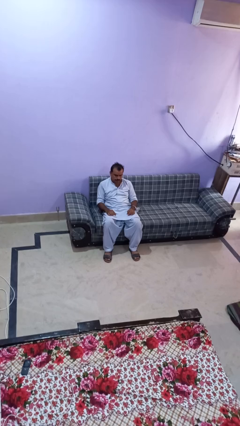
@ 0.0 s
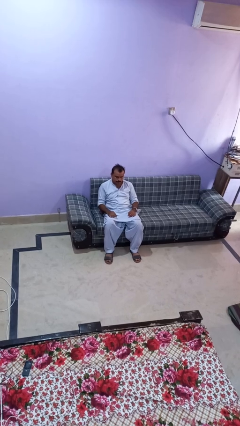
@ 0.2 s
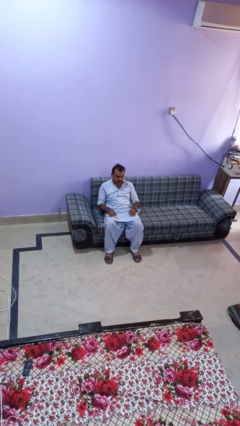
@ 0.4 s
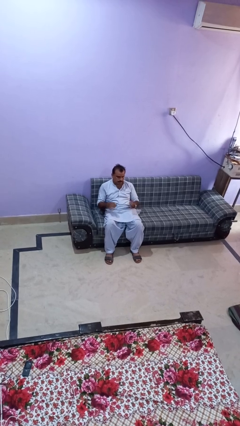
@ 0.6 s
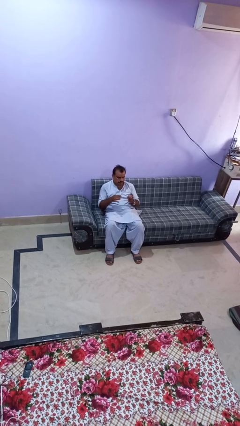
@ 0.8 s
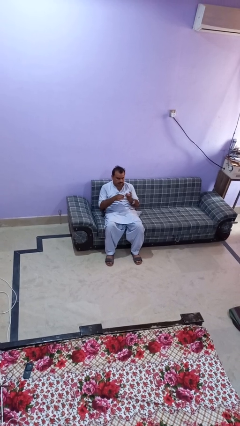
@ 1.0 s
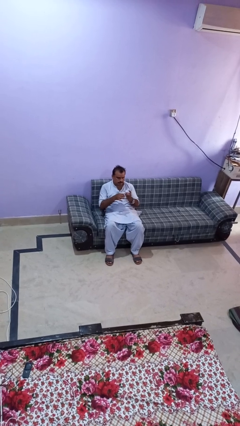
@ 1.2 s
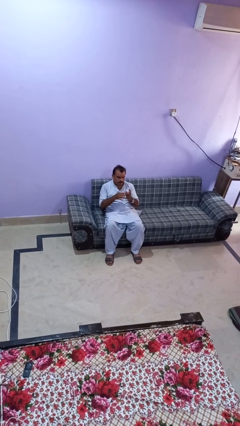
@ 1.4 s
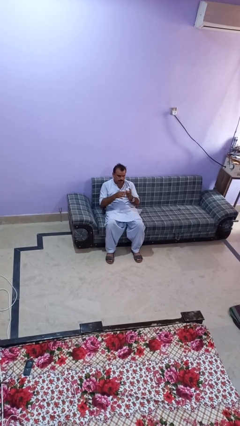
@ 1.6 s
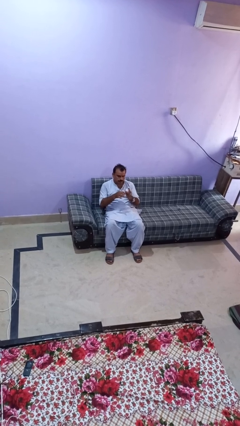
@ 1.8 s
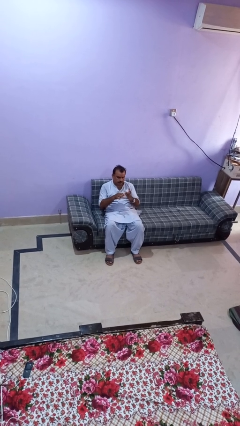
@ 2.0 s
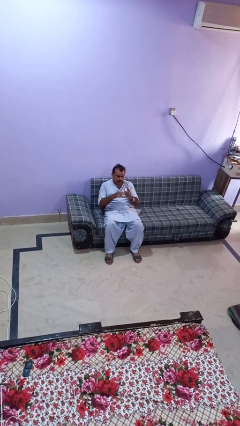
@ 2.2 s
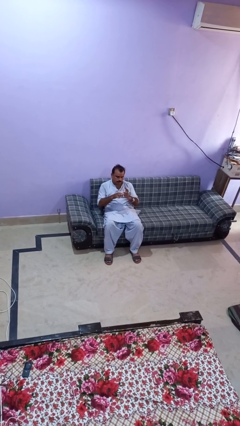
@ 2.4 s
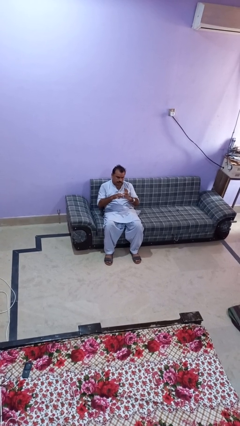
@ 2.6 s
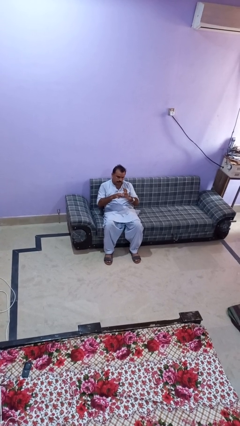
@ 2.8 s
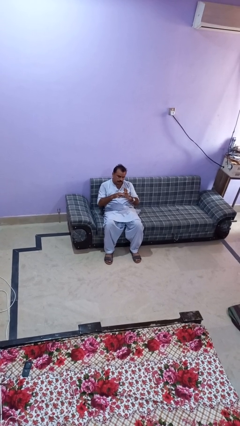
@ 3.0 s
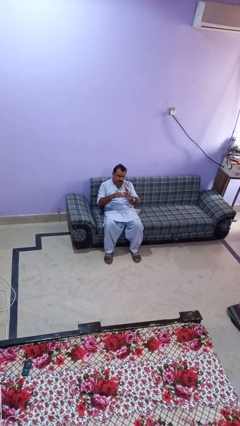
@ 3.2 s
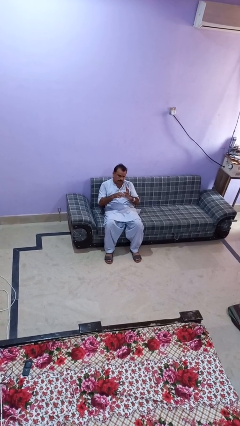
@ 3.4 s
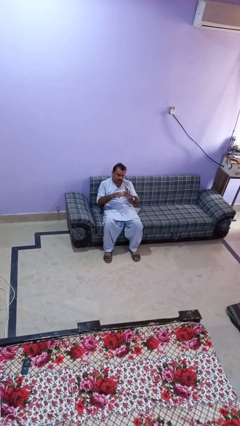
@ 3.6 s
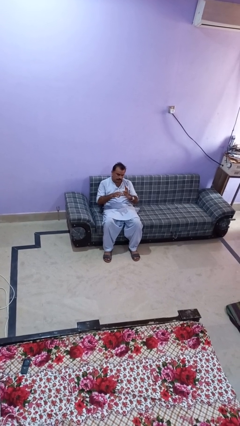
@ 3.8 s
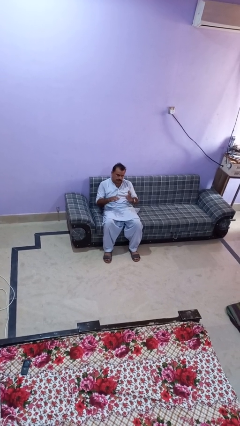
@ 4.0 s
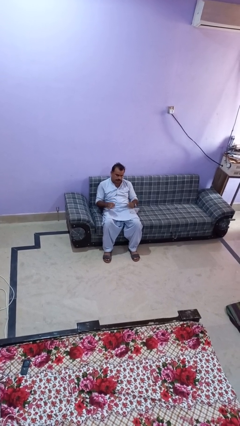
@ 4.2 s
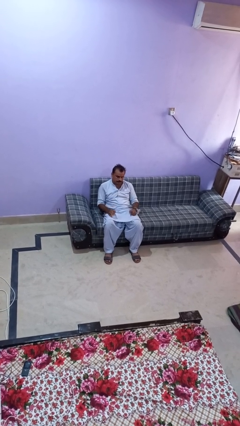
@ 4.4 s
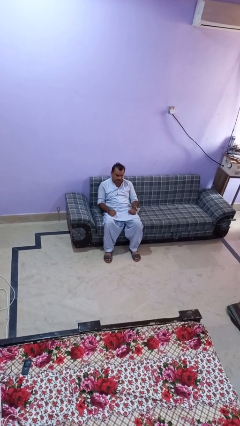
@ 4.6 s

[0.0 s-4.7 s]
person files fingernails

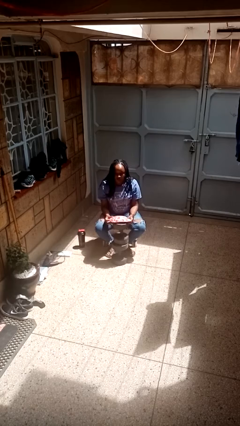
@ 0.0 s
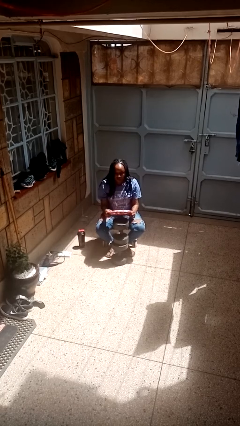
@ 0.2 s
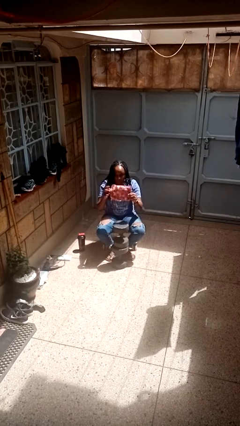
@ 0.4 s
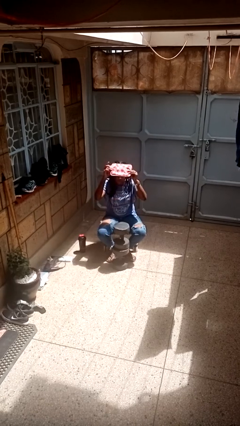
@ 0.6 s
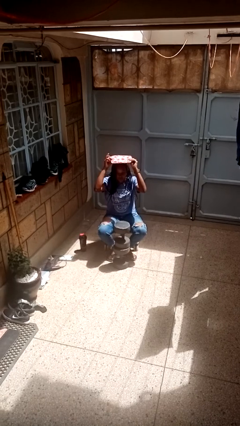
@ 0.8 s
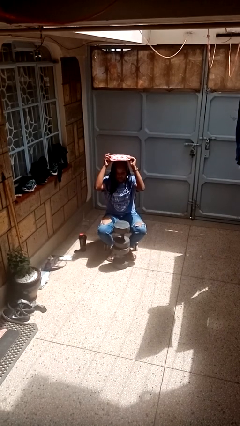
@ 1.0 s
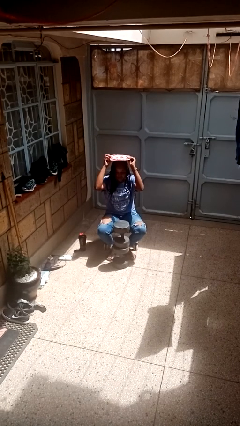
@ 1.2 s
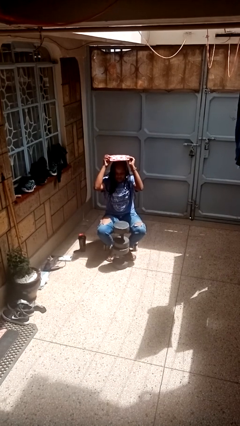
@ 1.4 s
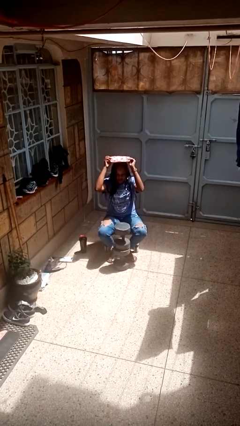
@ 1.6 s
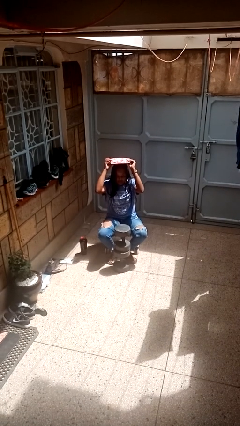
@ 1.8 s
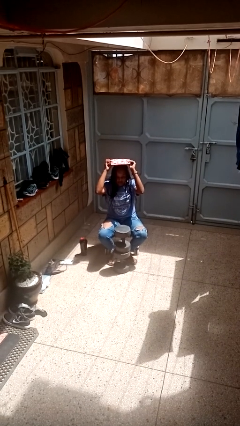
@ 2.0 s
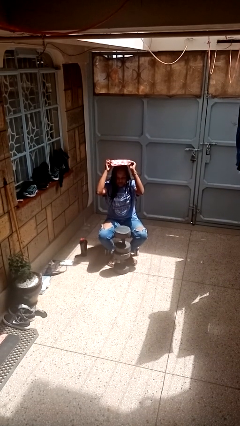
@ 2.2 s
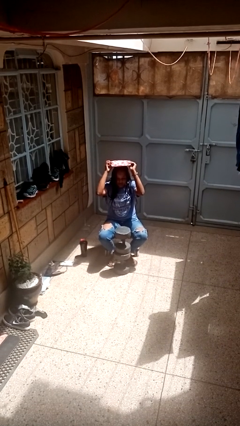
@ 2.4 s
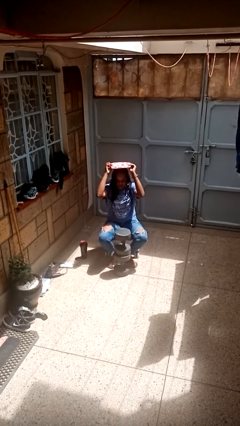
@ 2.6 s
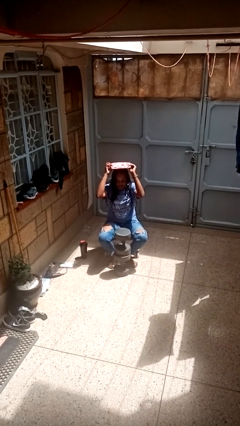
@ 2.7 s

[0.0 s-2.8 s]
person holds object above head

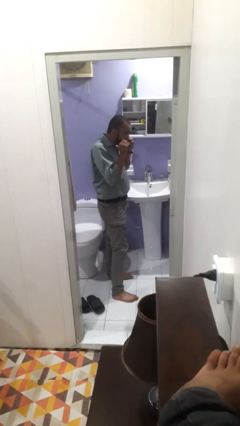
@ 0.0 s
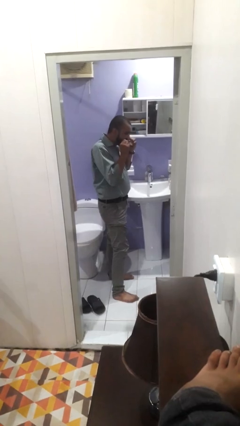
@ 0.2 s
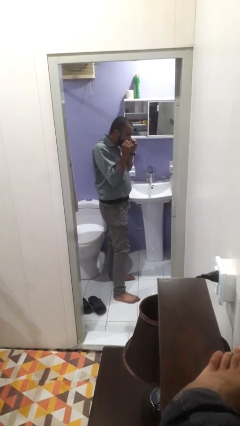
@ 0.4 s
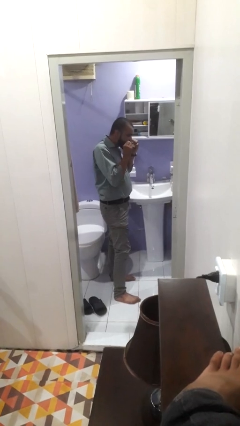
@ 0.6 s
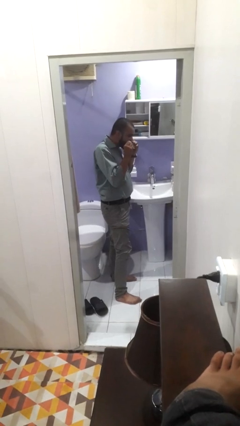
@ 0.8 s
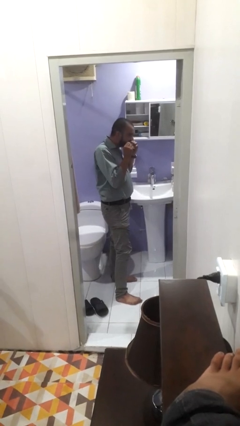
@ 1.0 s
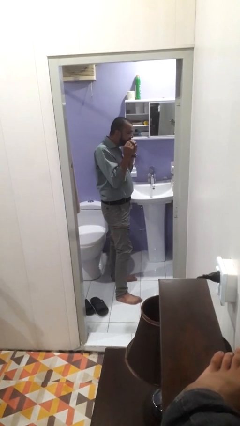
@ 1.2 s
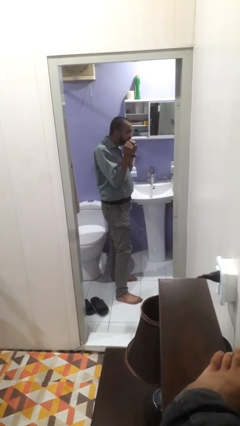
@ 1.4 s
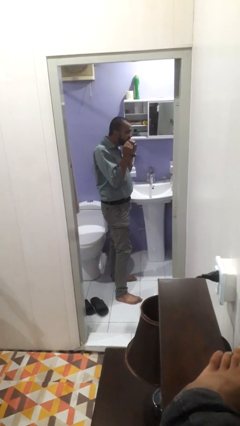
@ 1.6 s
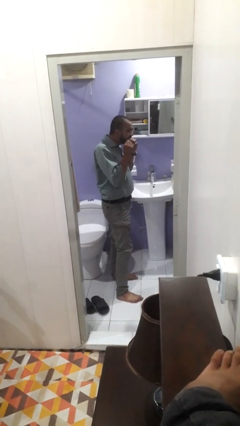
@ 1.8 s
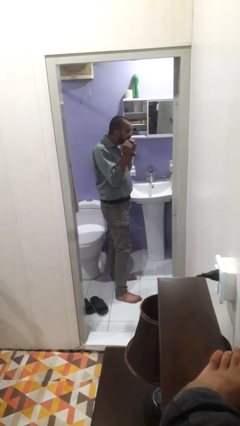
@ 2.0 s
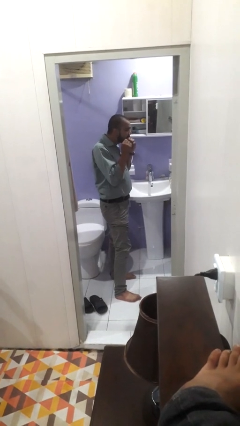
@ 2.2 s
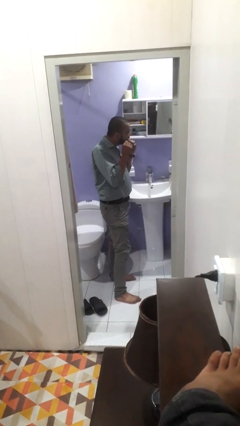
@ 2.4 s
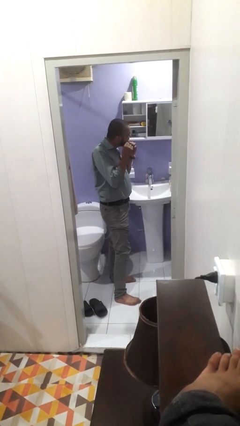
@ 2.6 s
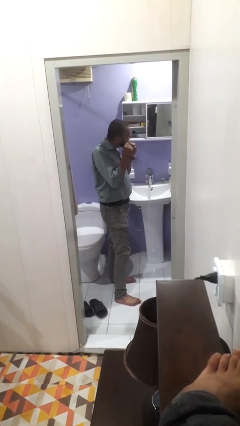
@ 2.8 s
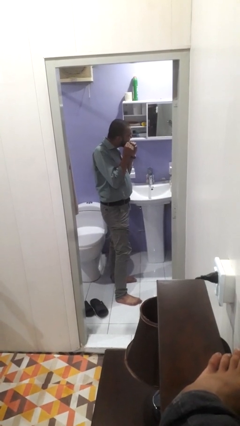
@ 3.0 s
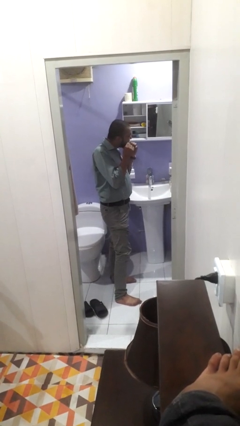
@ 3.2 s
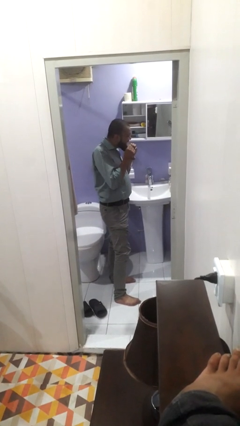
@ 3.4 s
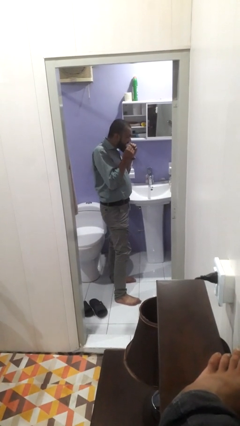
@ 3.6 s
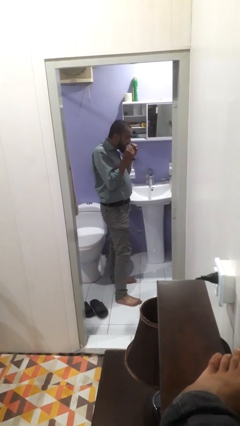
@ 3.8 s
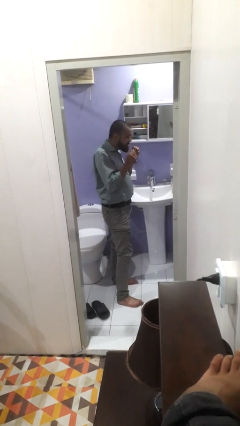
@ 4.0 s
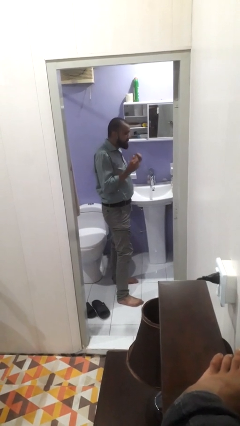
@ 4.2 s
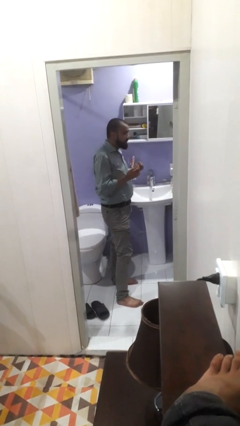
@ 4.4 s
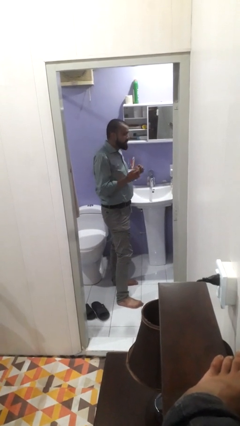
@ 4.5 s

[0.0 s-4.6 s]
person flosses

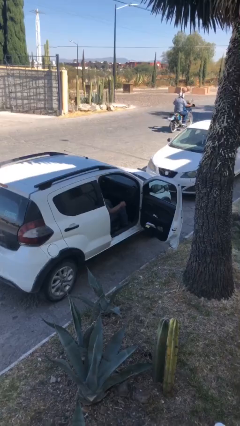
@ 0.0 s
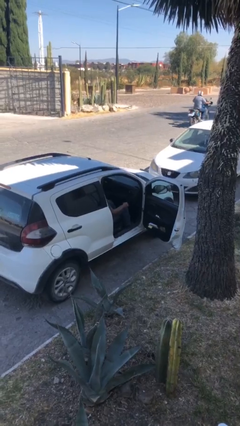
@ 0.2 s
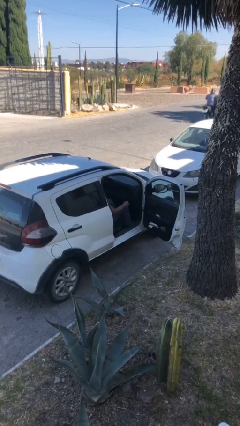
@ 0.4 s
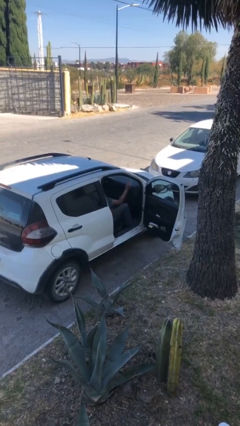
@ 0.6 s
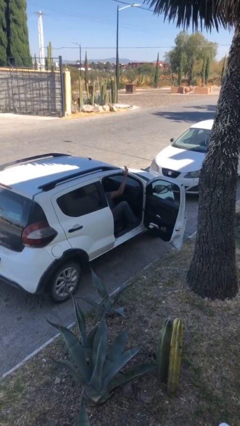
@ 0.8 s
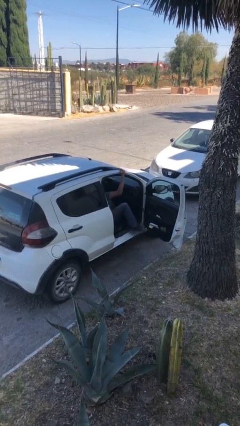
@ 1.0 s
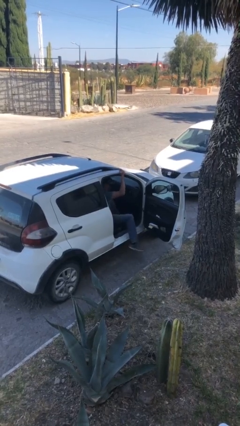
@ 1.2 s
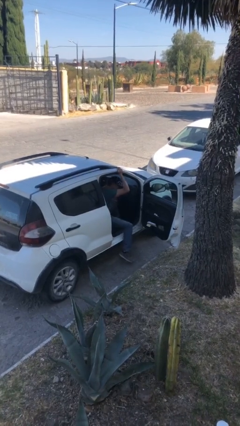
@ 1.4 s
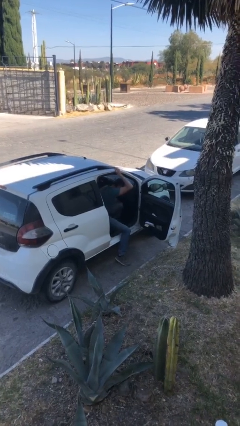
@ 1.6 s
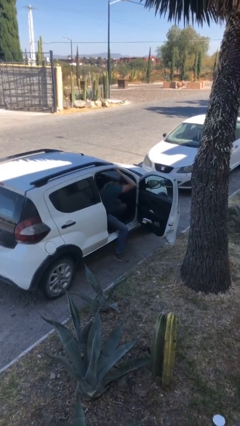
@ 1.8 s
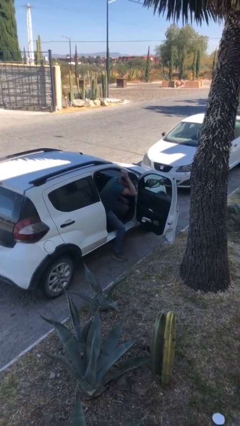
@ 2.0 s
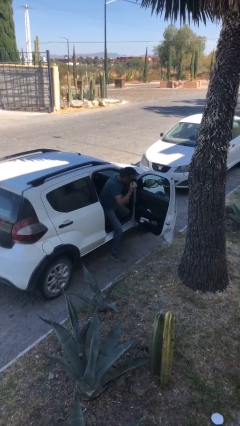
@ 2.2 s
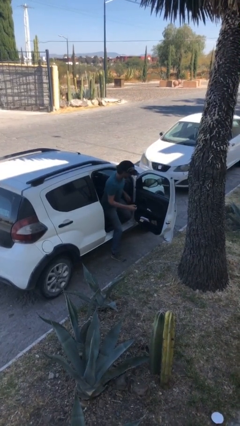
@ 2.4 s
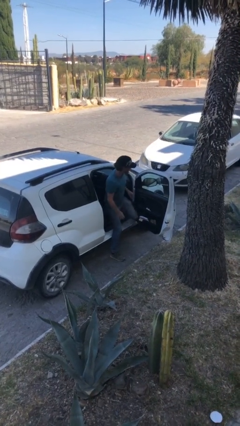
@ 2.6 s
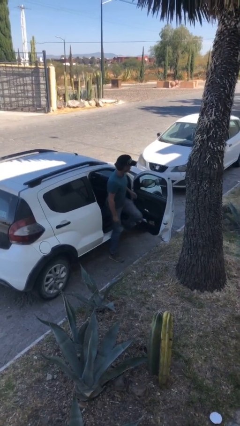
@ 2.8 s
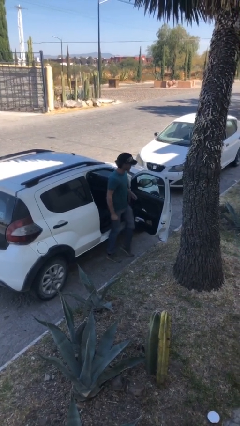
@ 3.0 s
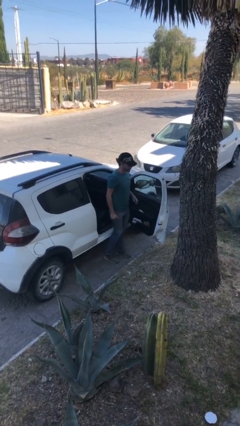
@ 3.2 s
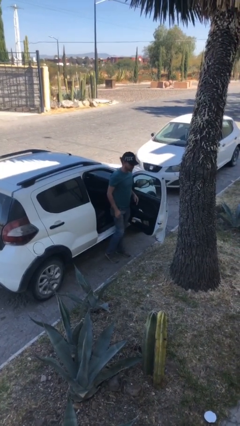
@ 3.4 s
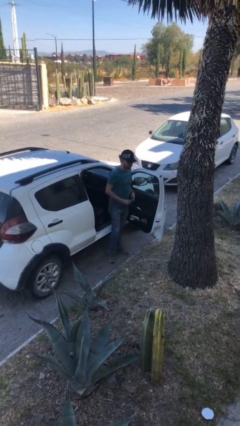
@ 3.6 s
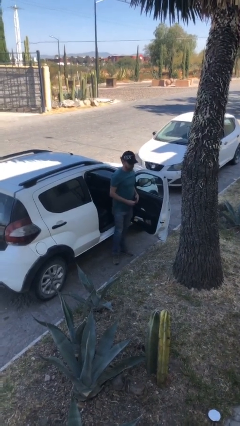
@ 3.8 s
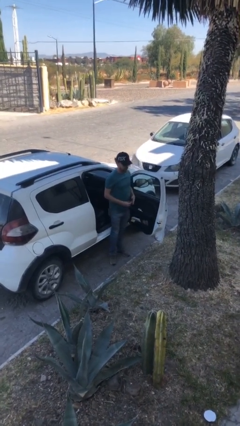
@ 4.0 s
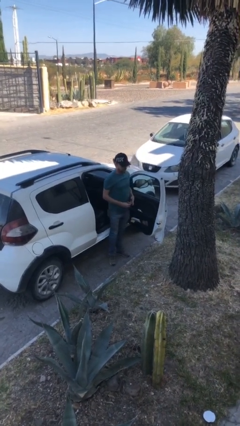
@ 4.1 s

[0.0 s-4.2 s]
person exits car

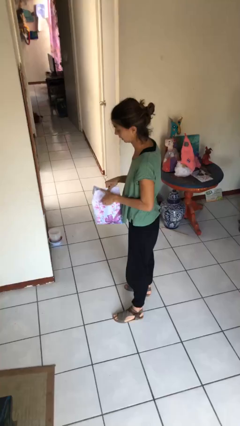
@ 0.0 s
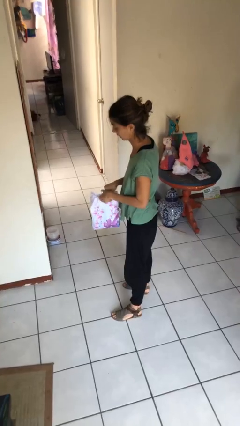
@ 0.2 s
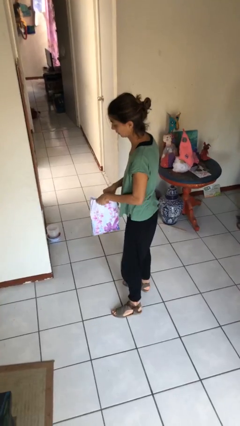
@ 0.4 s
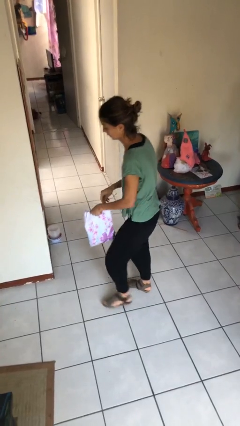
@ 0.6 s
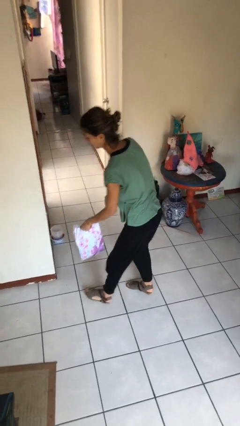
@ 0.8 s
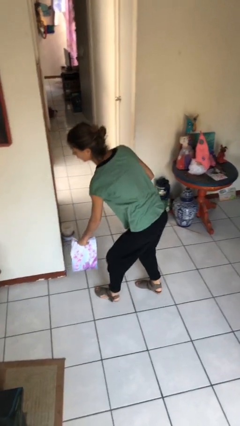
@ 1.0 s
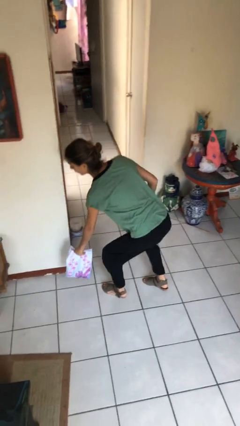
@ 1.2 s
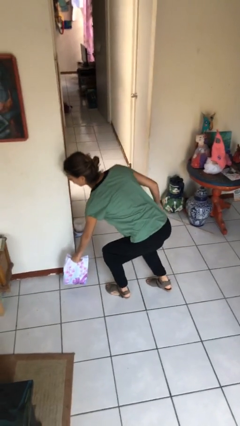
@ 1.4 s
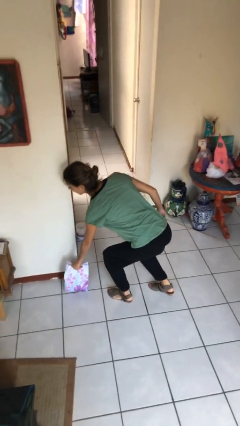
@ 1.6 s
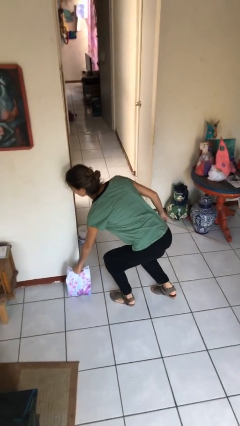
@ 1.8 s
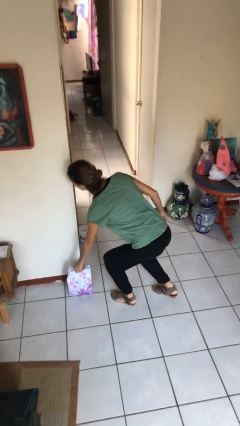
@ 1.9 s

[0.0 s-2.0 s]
person puts down object on floor
